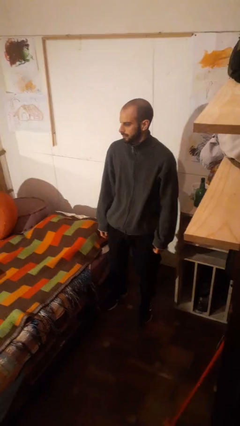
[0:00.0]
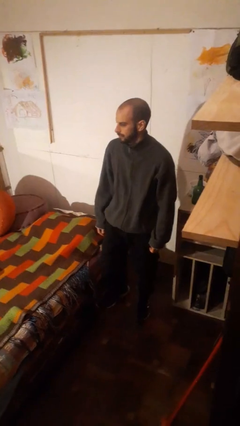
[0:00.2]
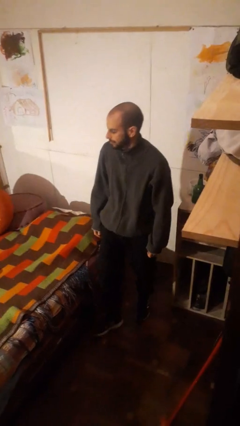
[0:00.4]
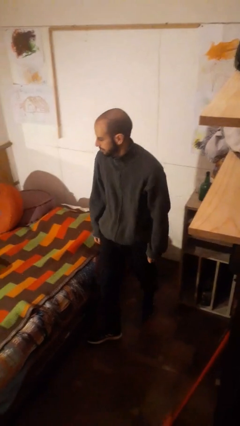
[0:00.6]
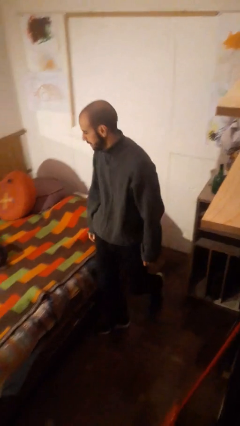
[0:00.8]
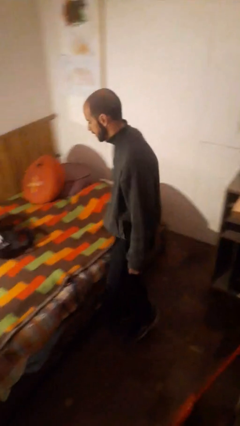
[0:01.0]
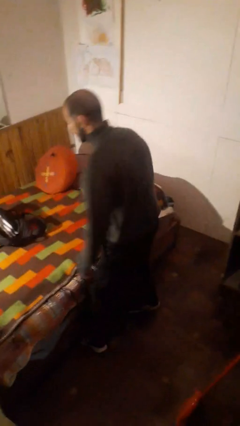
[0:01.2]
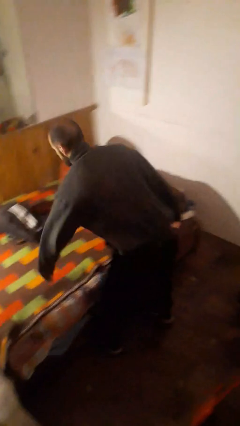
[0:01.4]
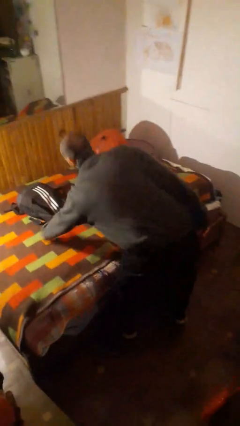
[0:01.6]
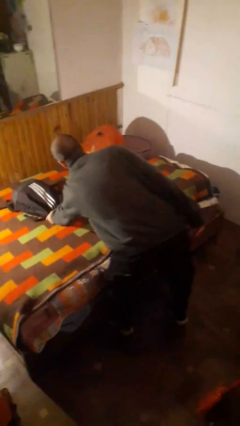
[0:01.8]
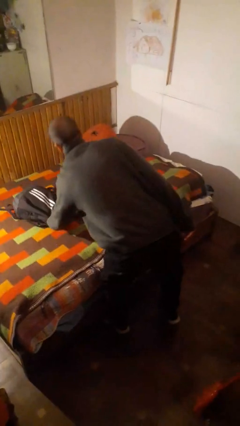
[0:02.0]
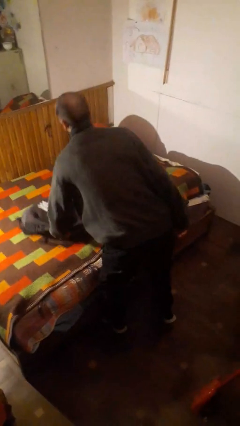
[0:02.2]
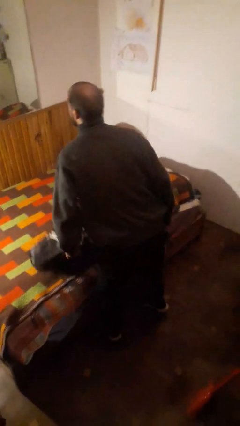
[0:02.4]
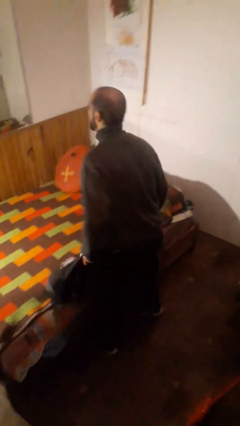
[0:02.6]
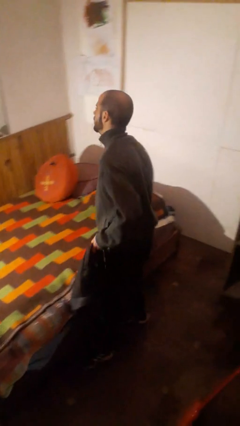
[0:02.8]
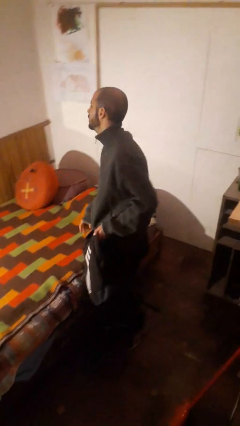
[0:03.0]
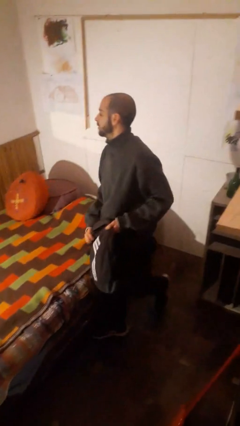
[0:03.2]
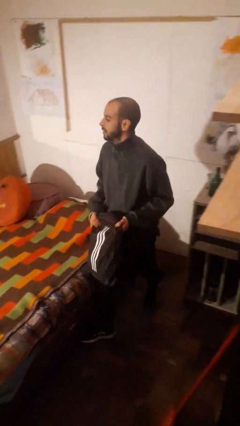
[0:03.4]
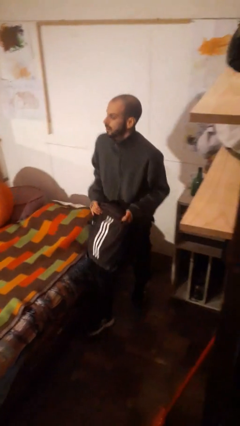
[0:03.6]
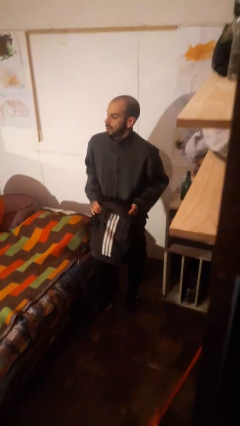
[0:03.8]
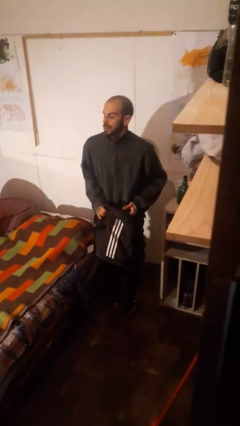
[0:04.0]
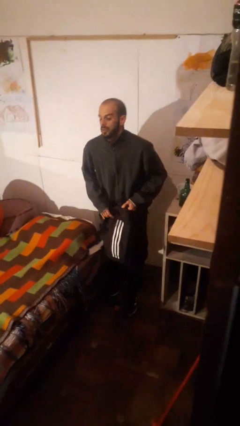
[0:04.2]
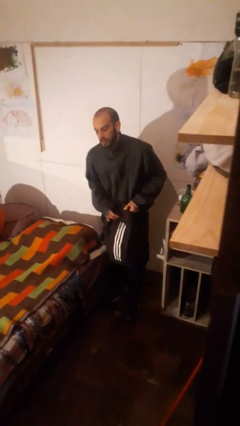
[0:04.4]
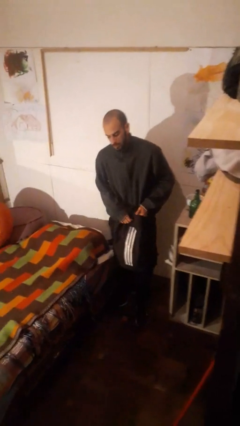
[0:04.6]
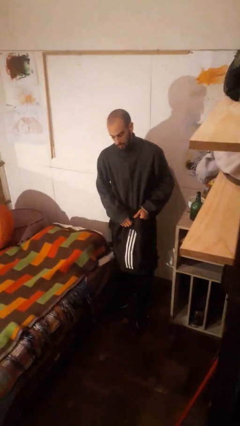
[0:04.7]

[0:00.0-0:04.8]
person picks up object from bed

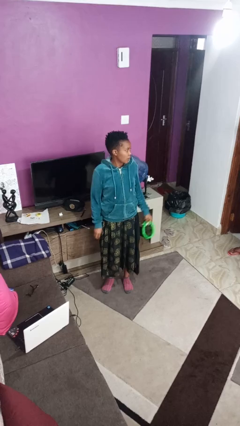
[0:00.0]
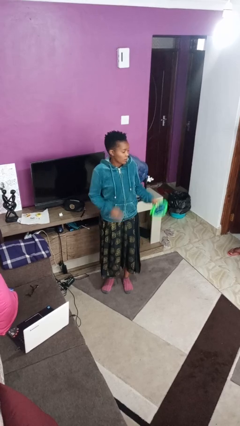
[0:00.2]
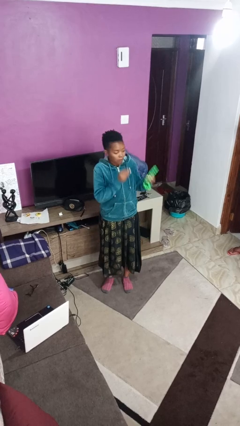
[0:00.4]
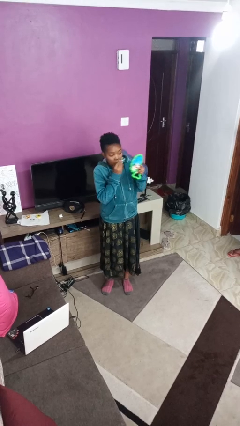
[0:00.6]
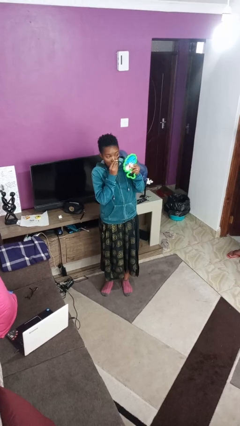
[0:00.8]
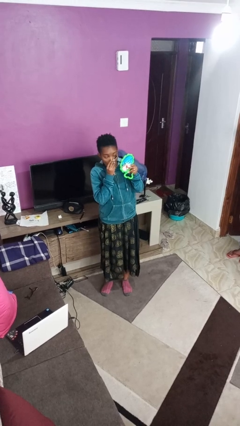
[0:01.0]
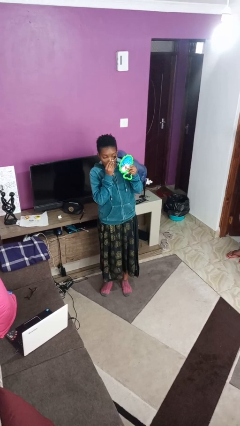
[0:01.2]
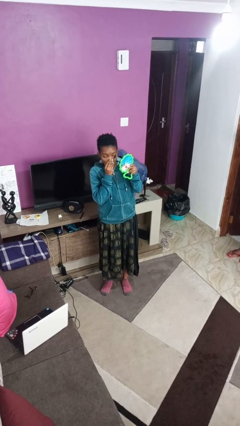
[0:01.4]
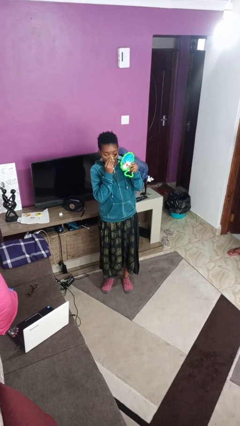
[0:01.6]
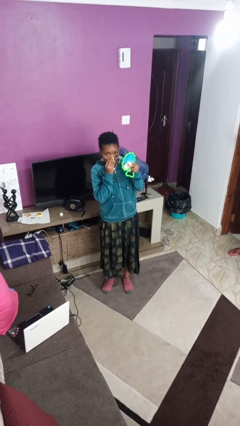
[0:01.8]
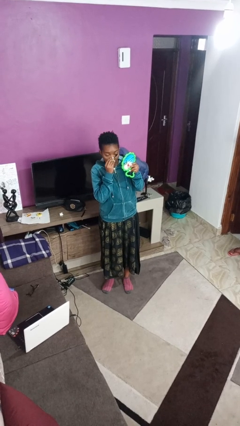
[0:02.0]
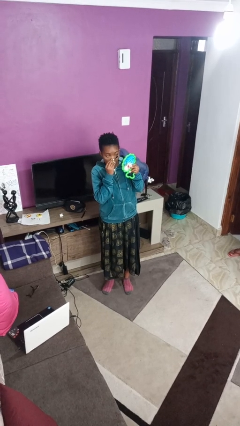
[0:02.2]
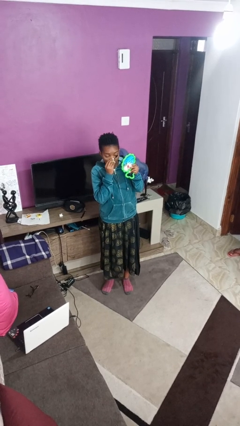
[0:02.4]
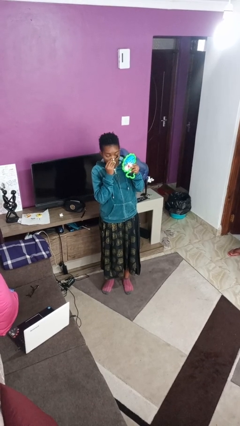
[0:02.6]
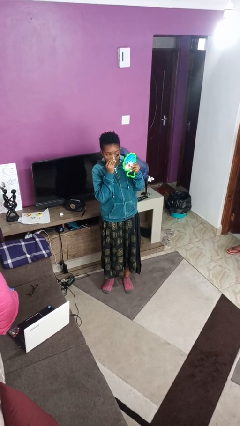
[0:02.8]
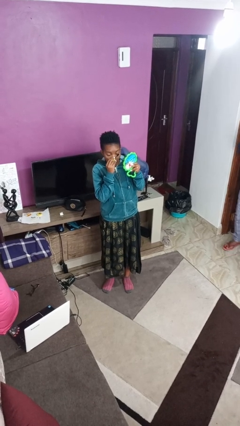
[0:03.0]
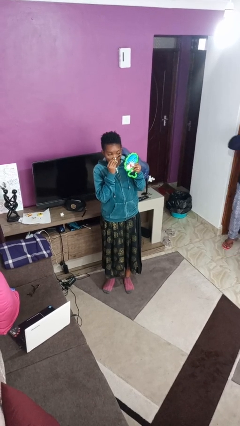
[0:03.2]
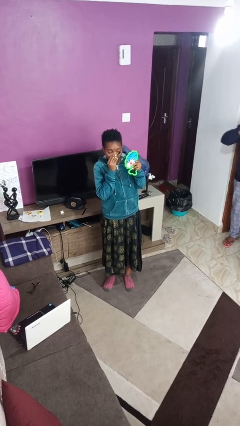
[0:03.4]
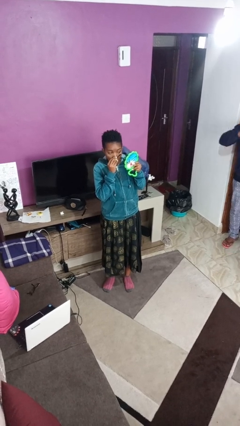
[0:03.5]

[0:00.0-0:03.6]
person applies eye makeup

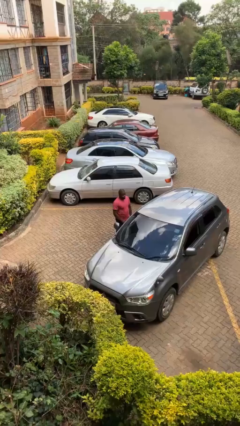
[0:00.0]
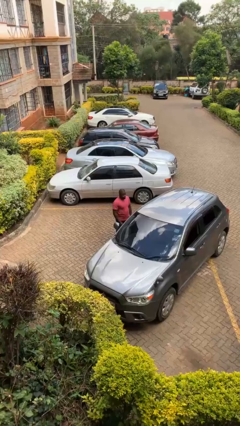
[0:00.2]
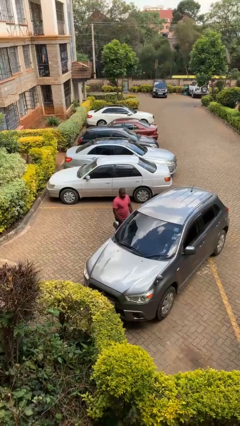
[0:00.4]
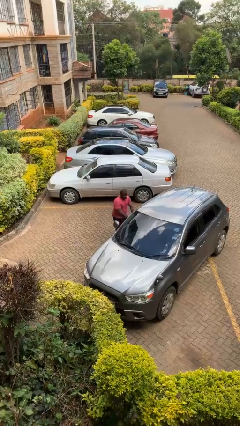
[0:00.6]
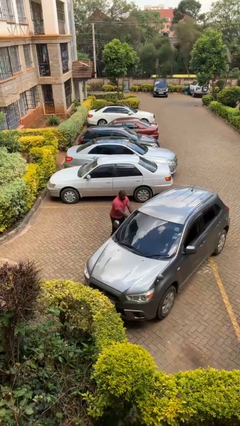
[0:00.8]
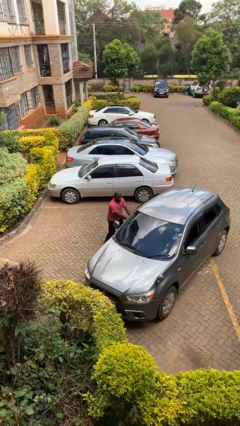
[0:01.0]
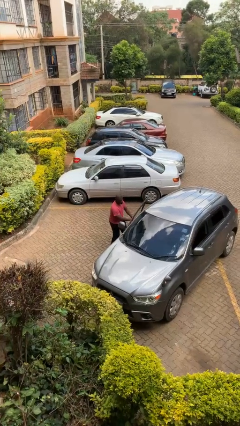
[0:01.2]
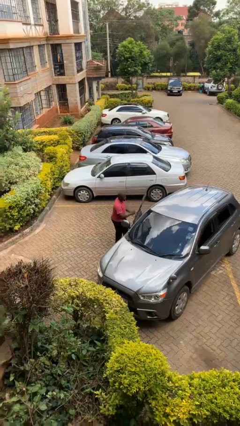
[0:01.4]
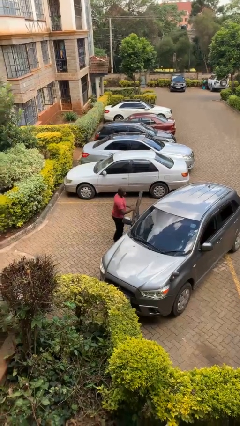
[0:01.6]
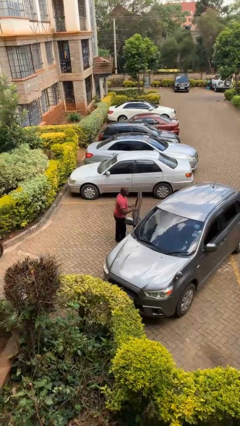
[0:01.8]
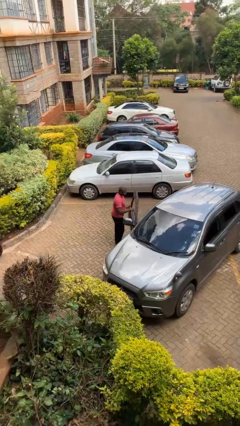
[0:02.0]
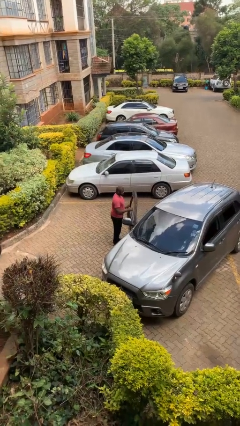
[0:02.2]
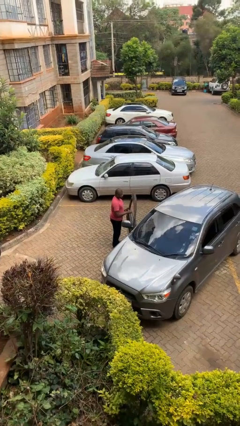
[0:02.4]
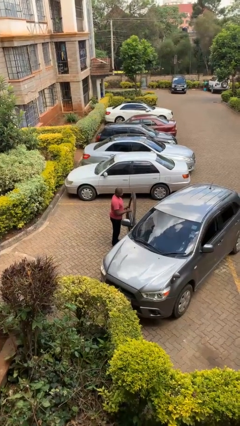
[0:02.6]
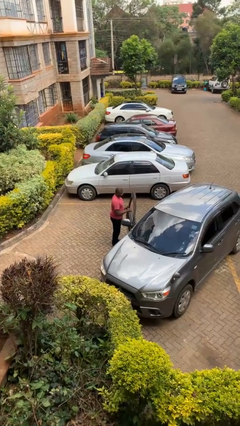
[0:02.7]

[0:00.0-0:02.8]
person opens car door

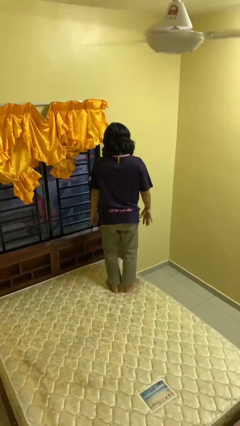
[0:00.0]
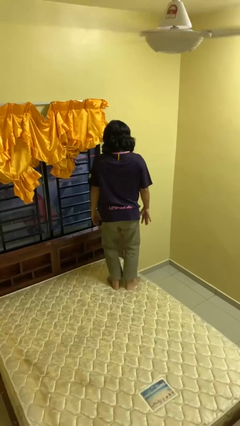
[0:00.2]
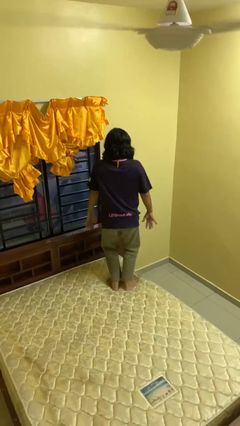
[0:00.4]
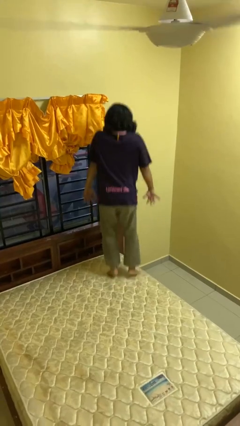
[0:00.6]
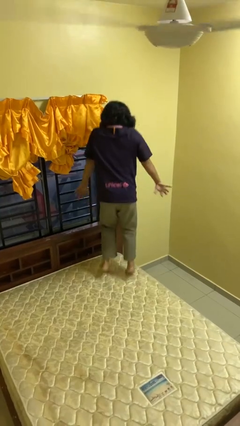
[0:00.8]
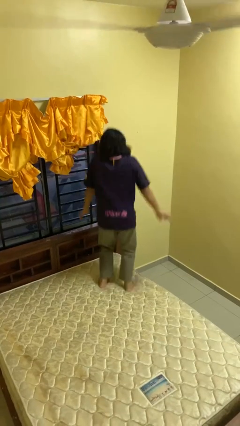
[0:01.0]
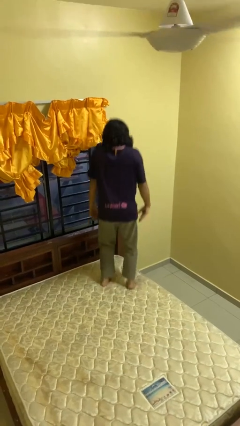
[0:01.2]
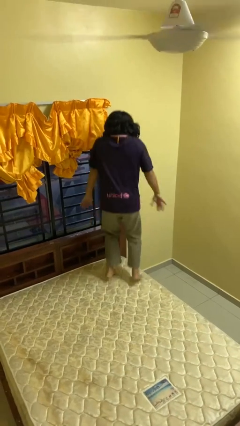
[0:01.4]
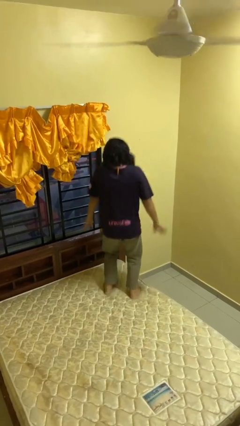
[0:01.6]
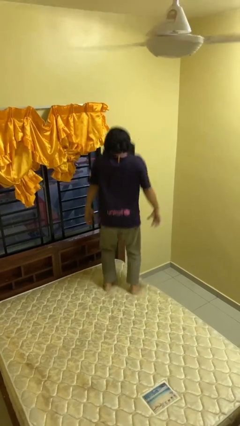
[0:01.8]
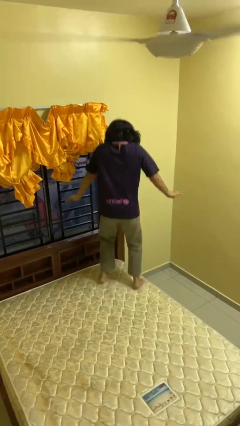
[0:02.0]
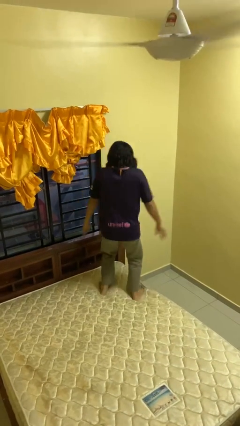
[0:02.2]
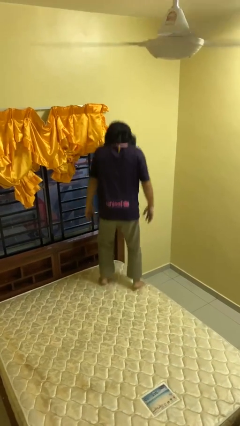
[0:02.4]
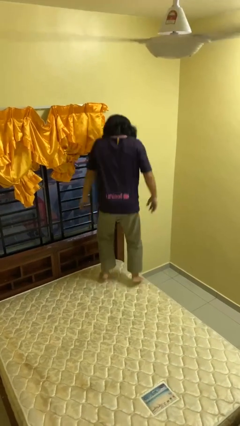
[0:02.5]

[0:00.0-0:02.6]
person jumps on bed

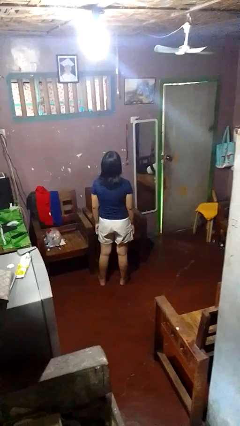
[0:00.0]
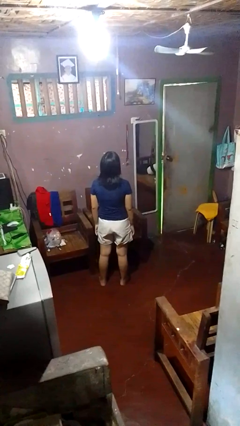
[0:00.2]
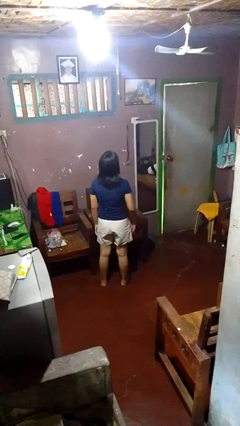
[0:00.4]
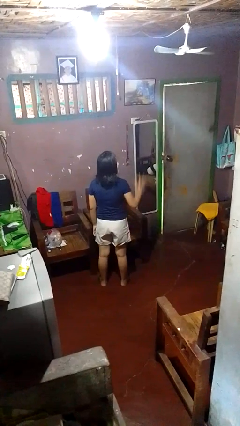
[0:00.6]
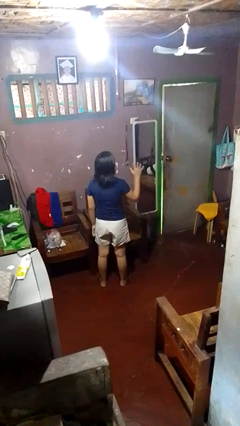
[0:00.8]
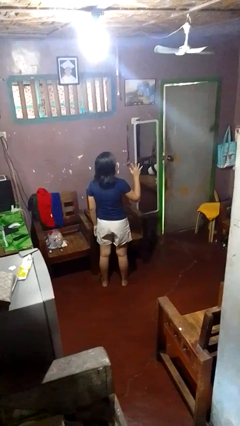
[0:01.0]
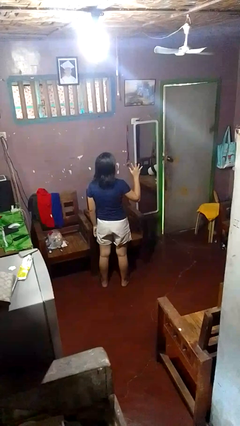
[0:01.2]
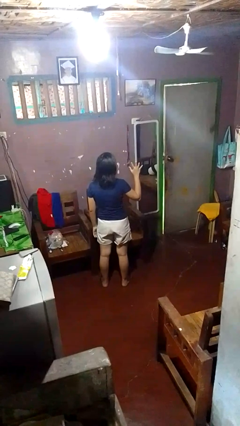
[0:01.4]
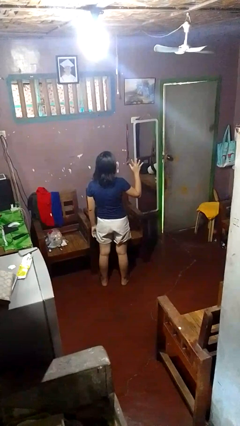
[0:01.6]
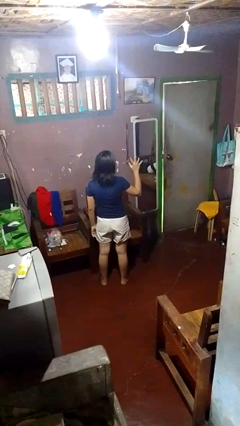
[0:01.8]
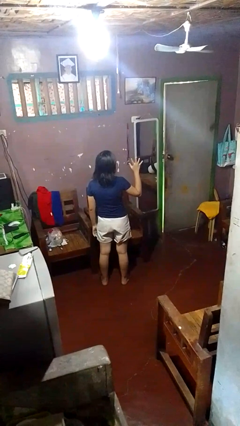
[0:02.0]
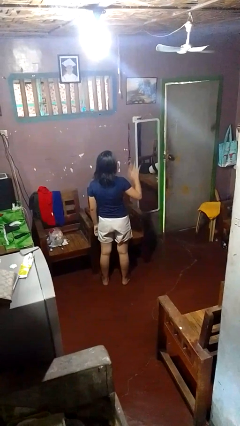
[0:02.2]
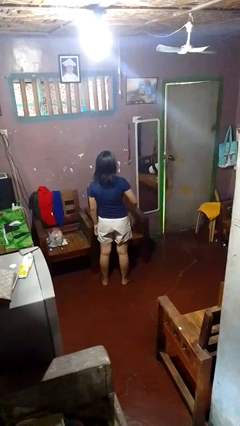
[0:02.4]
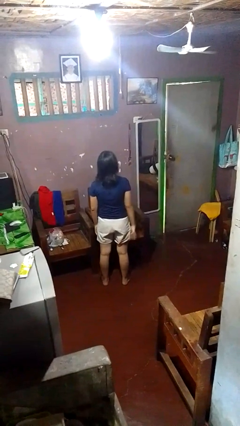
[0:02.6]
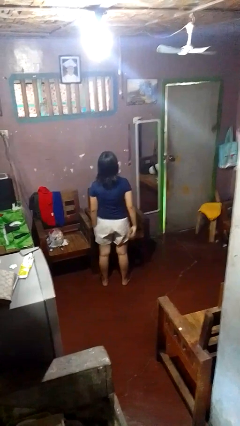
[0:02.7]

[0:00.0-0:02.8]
person gestures number five

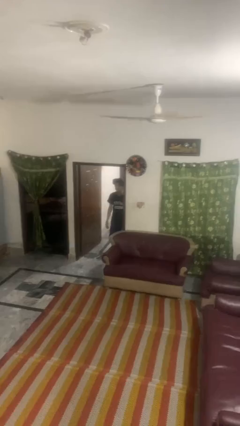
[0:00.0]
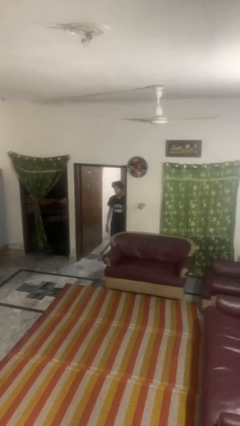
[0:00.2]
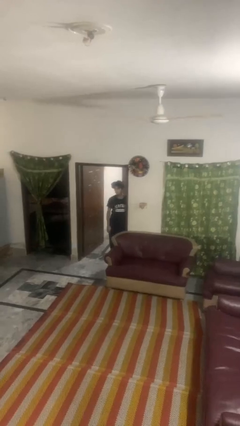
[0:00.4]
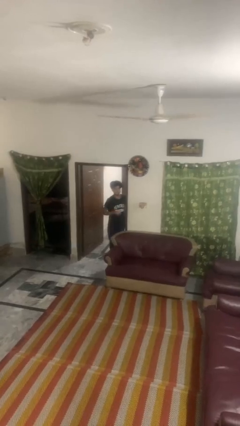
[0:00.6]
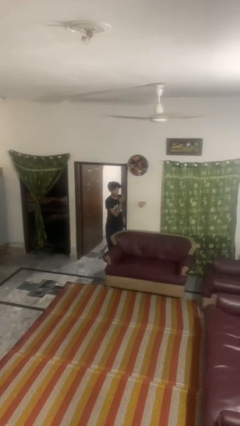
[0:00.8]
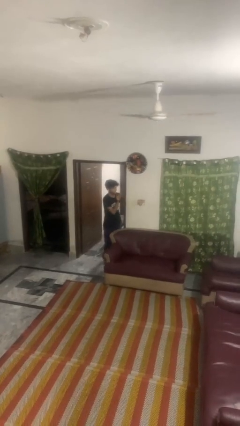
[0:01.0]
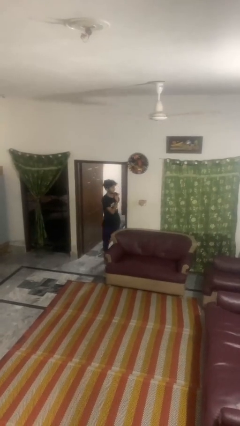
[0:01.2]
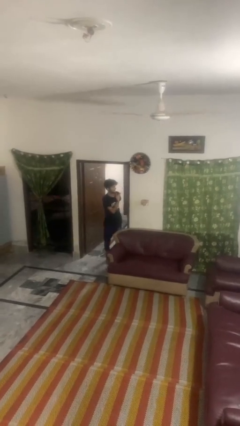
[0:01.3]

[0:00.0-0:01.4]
person bumps into wall
